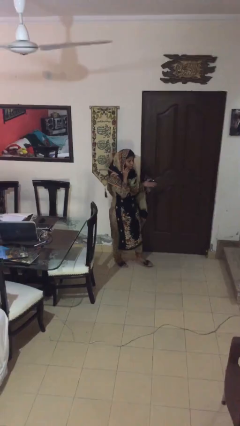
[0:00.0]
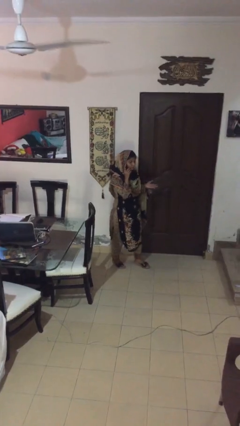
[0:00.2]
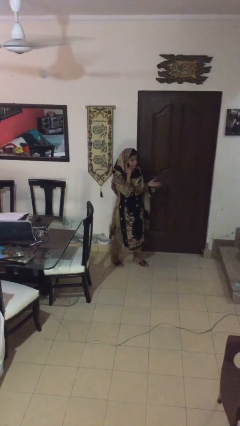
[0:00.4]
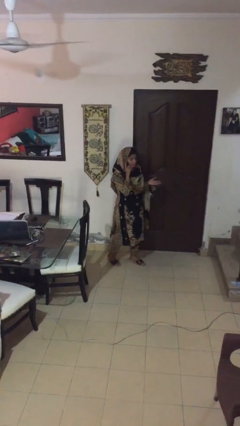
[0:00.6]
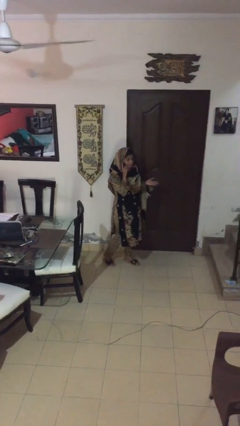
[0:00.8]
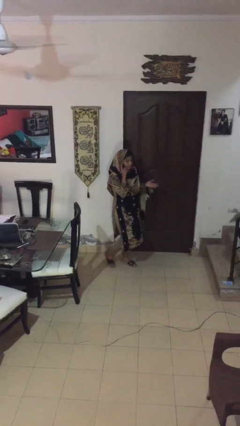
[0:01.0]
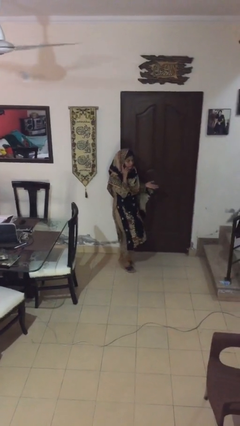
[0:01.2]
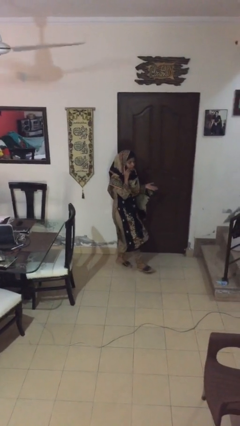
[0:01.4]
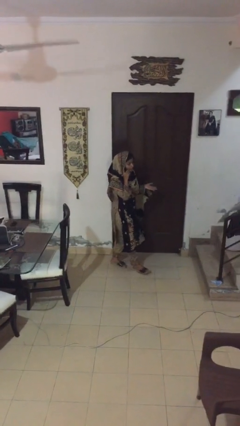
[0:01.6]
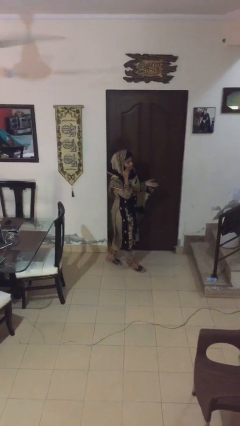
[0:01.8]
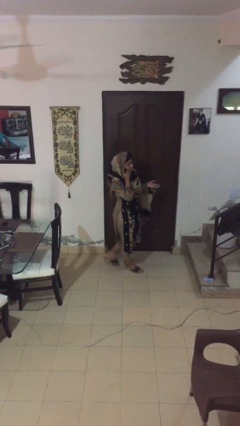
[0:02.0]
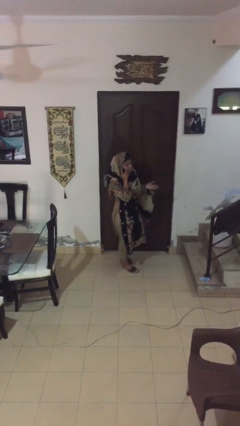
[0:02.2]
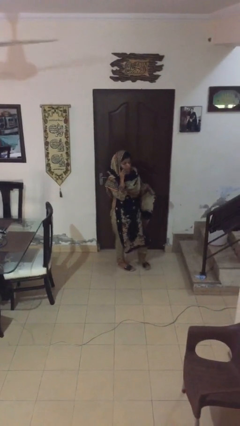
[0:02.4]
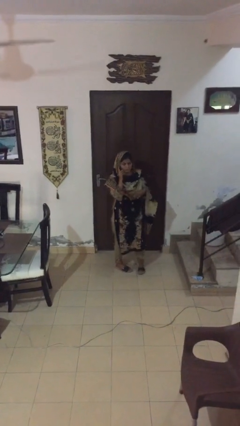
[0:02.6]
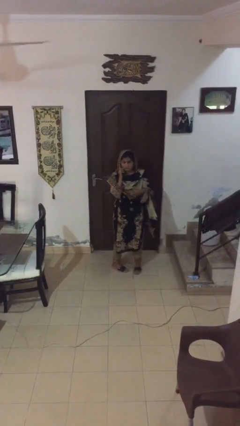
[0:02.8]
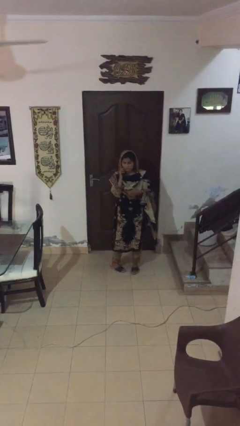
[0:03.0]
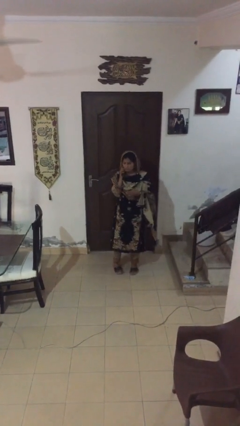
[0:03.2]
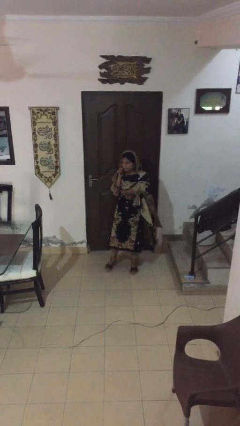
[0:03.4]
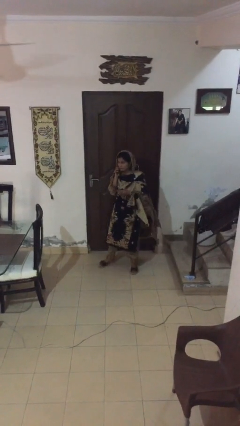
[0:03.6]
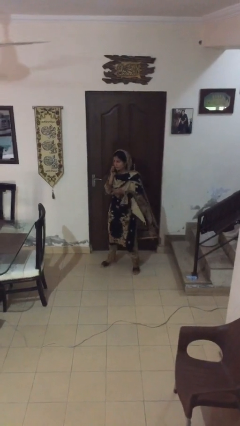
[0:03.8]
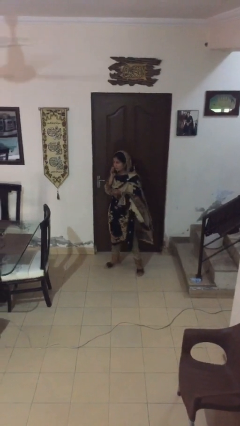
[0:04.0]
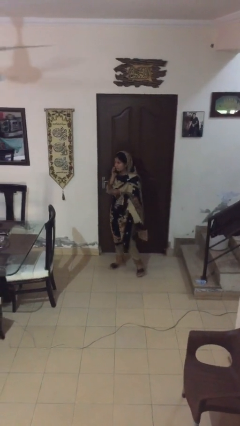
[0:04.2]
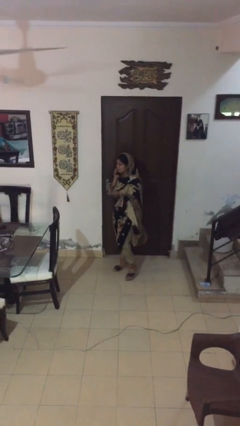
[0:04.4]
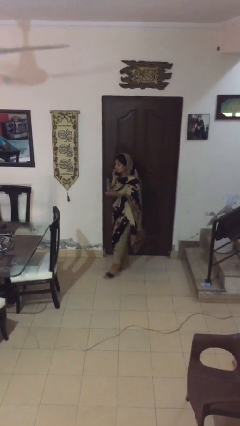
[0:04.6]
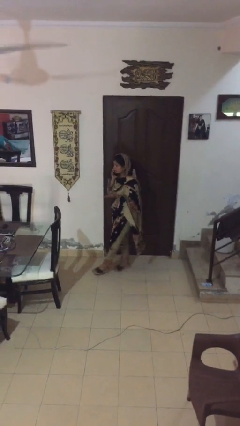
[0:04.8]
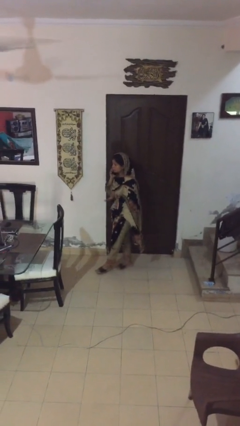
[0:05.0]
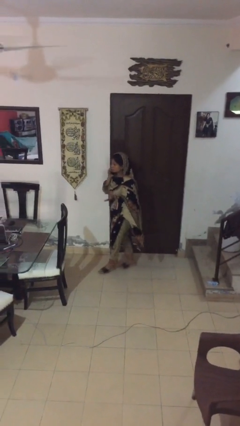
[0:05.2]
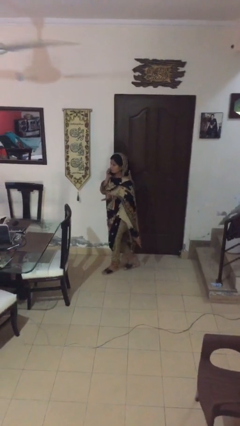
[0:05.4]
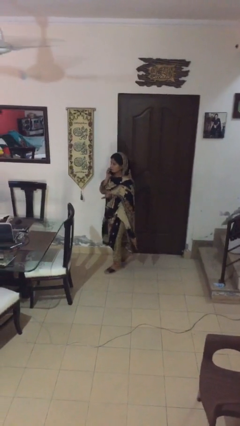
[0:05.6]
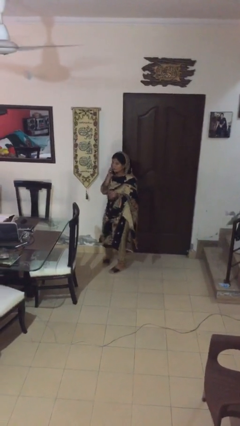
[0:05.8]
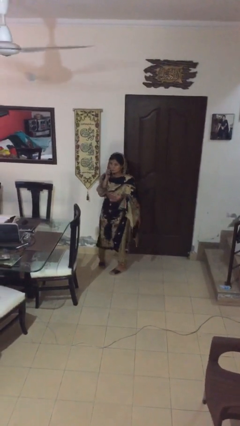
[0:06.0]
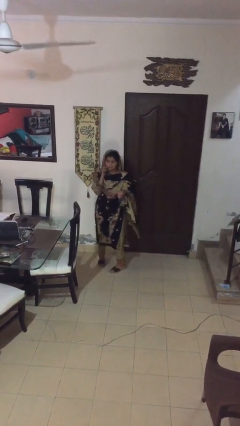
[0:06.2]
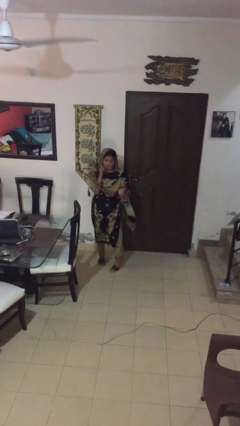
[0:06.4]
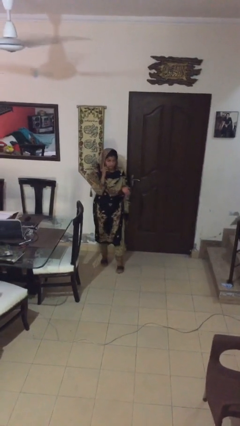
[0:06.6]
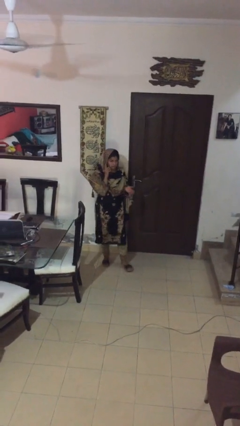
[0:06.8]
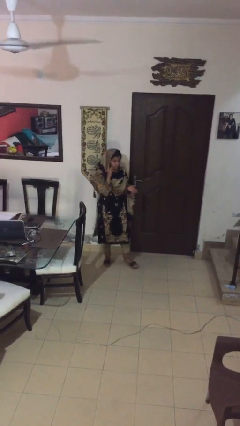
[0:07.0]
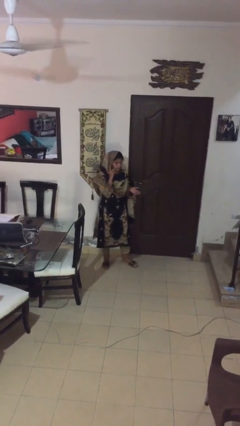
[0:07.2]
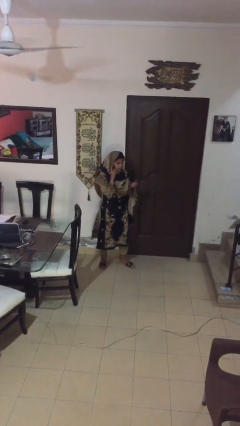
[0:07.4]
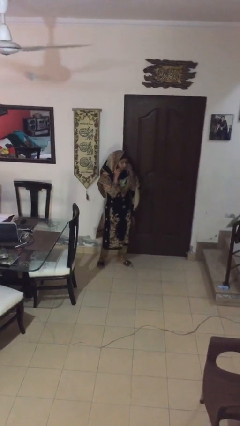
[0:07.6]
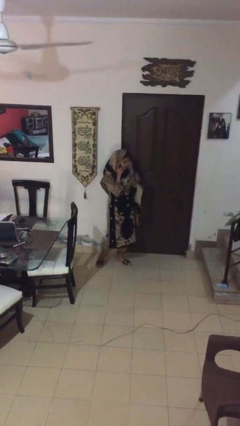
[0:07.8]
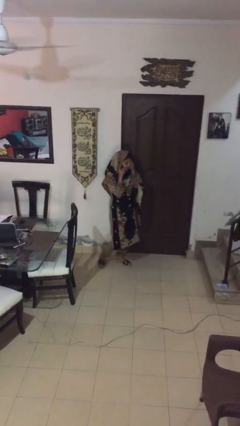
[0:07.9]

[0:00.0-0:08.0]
person talks on phone

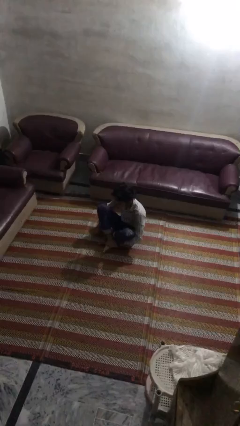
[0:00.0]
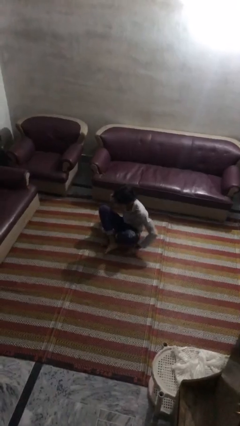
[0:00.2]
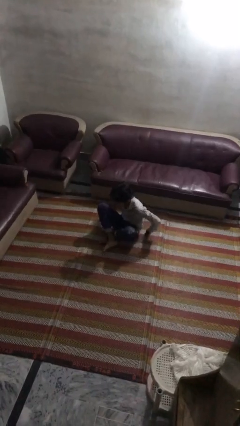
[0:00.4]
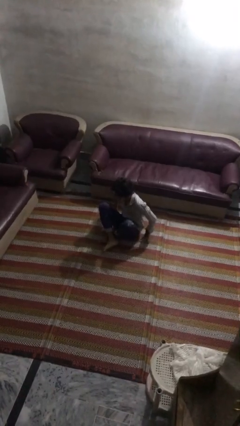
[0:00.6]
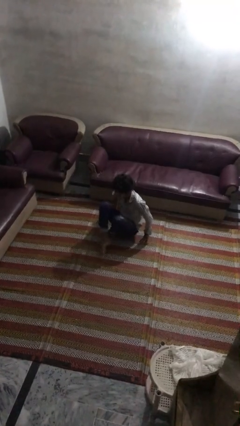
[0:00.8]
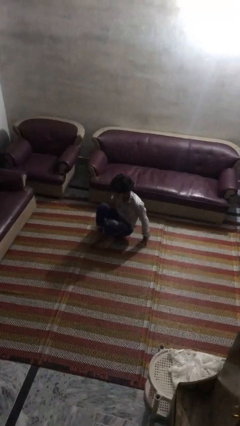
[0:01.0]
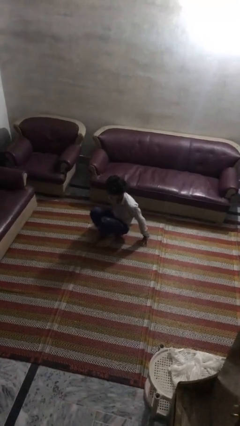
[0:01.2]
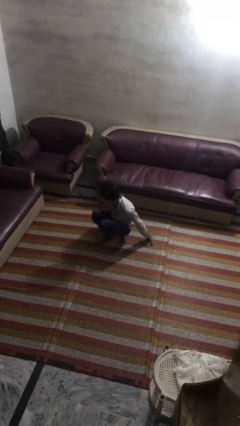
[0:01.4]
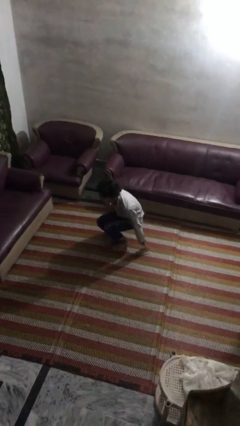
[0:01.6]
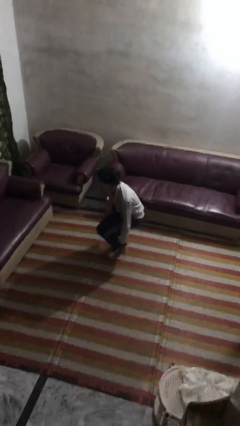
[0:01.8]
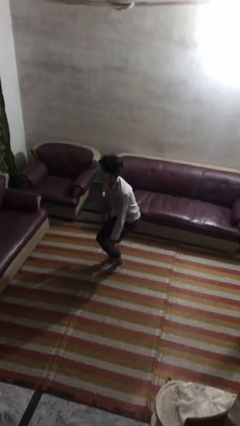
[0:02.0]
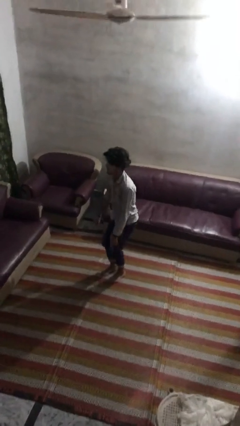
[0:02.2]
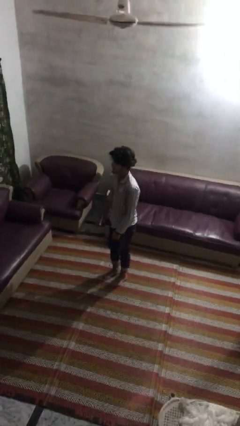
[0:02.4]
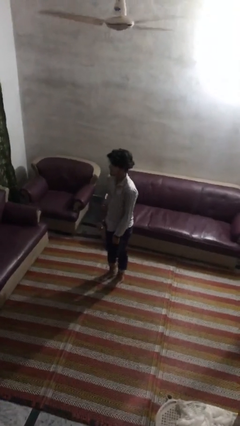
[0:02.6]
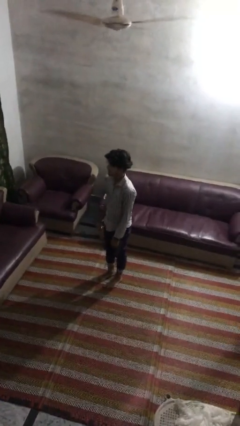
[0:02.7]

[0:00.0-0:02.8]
person stands up from floor

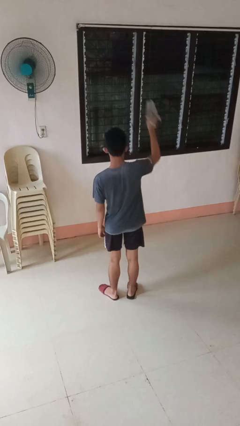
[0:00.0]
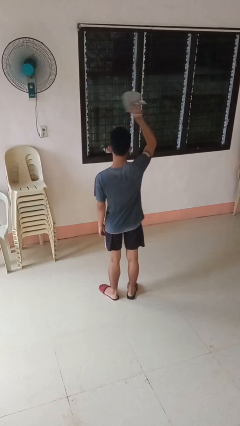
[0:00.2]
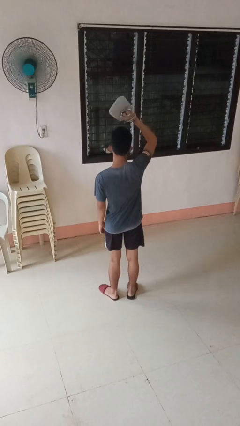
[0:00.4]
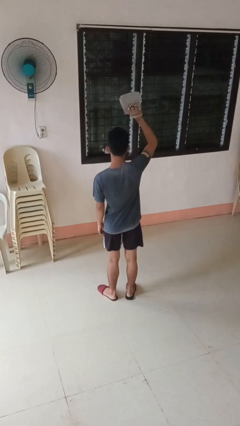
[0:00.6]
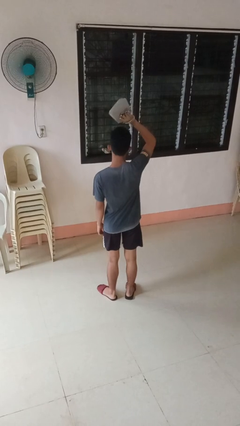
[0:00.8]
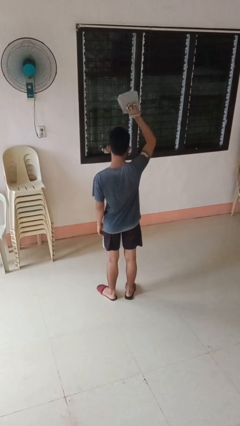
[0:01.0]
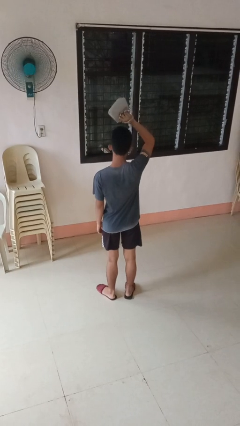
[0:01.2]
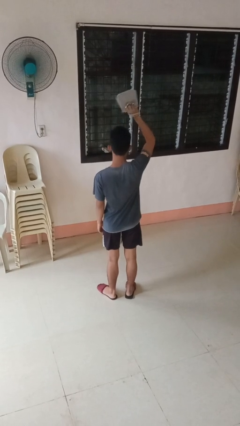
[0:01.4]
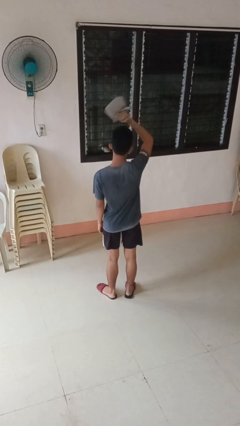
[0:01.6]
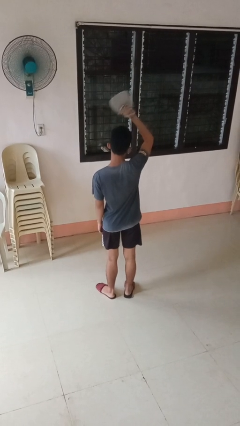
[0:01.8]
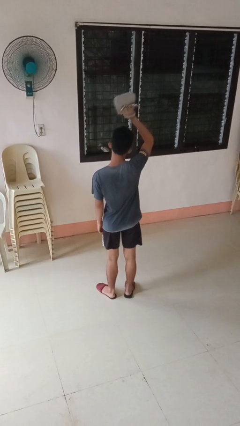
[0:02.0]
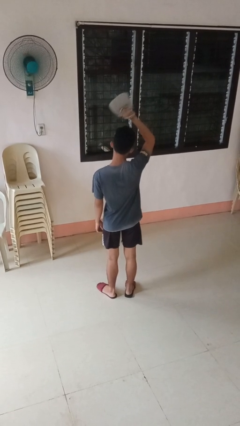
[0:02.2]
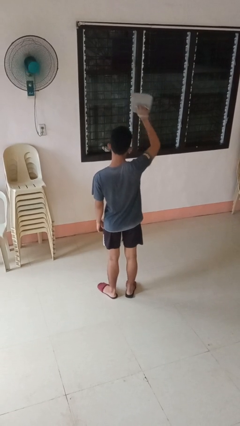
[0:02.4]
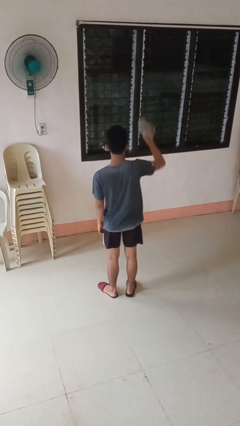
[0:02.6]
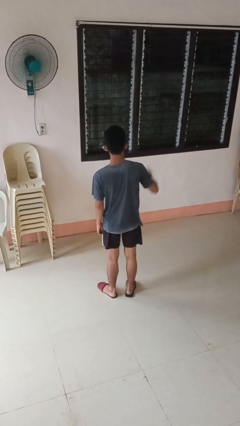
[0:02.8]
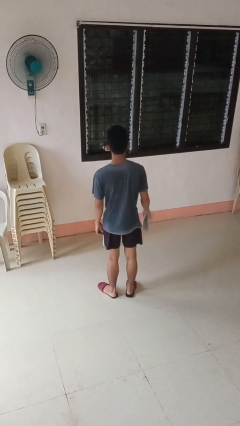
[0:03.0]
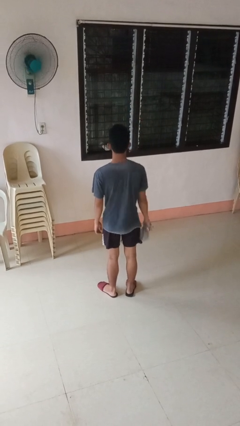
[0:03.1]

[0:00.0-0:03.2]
person holds object above head

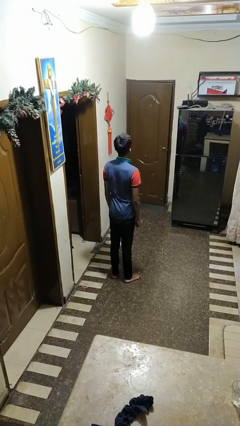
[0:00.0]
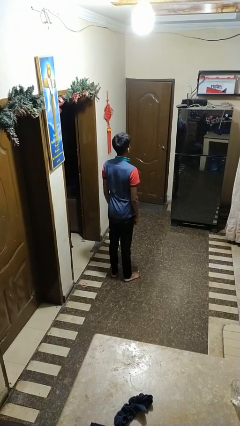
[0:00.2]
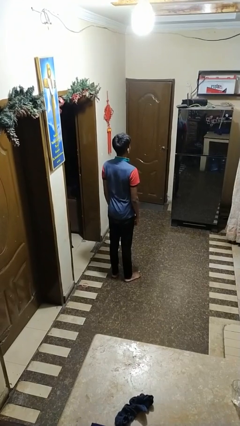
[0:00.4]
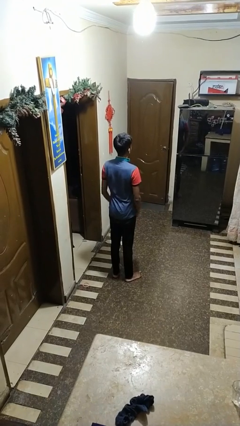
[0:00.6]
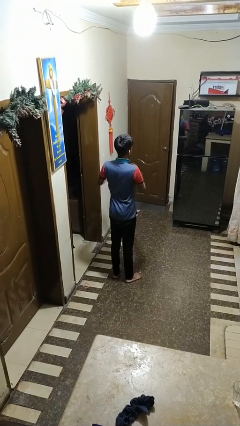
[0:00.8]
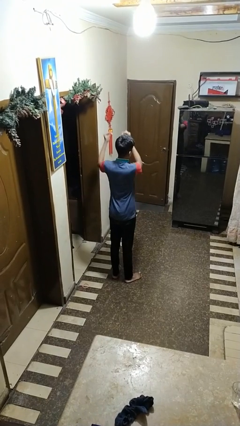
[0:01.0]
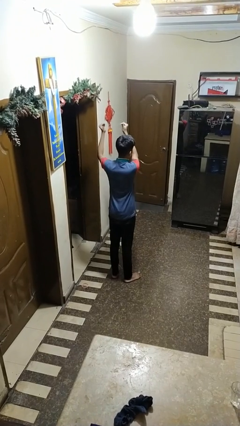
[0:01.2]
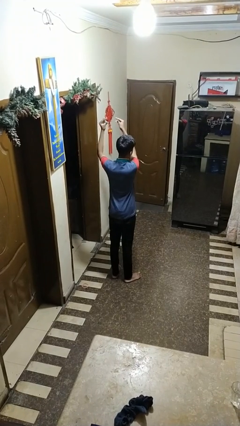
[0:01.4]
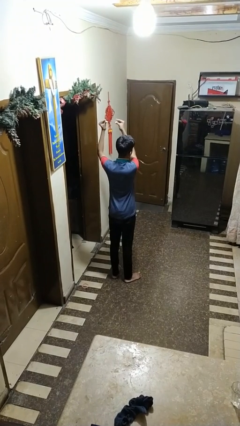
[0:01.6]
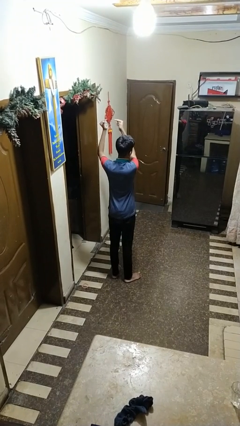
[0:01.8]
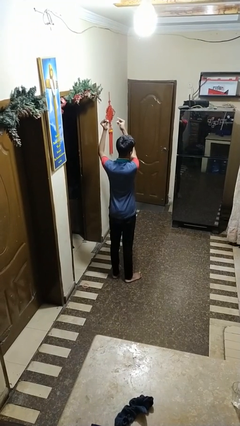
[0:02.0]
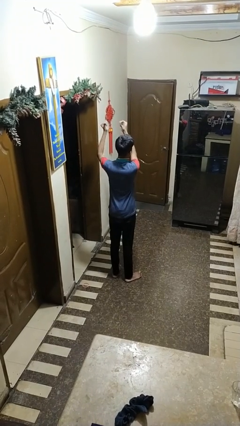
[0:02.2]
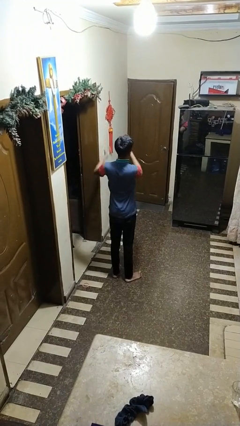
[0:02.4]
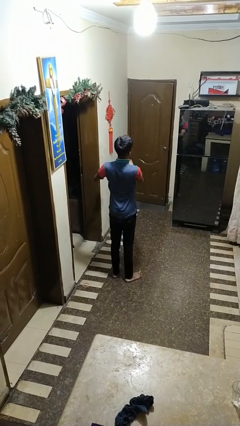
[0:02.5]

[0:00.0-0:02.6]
person snaps fingers

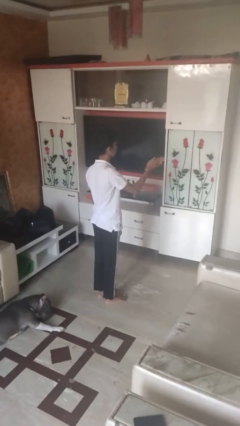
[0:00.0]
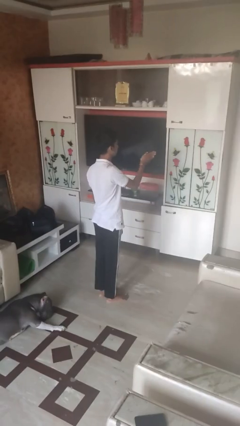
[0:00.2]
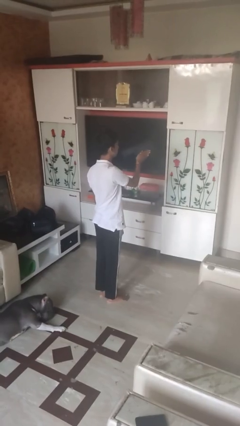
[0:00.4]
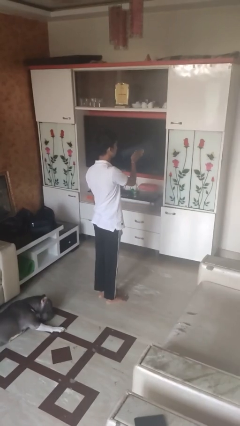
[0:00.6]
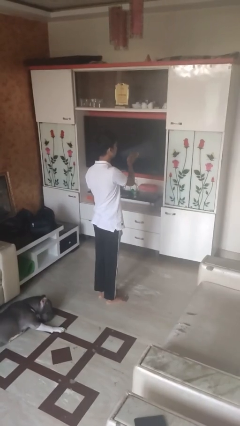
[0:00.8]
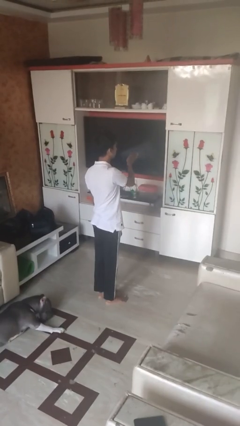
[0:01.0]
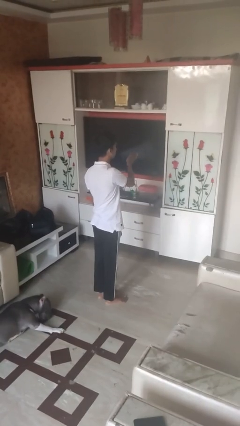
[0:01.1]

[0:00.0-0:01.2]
person gestures swipe left
